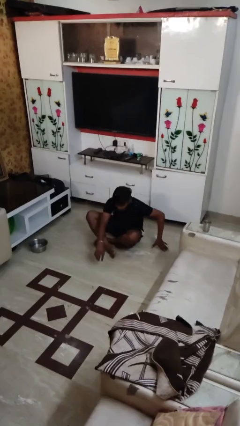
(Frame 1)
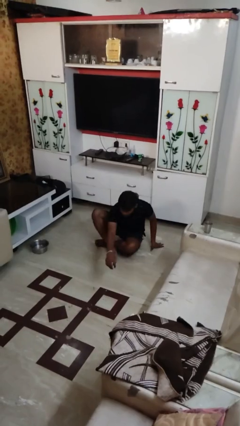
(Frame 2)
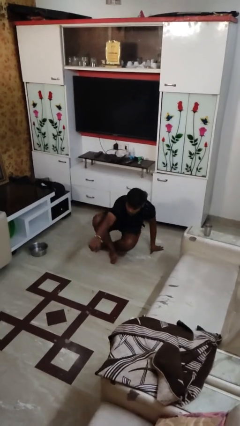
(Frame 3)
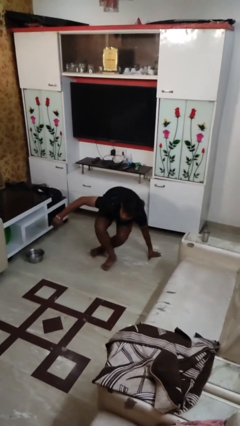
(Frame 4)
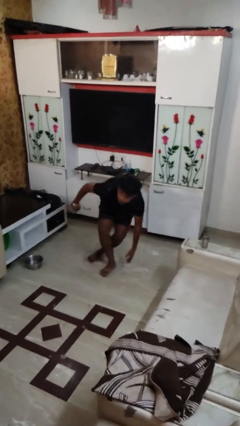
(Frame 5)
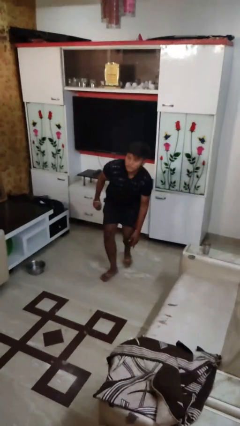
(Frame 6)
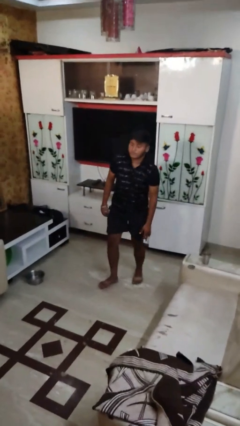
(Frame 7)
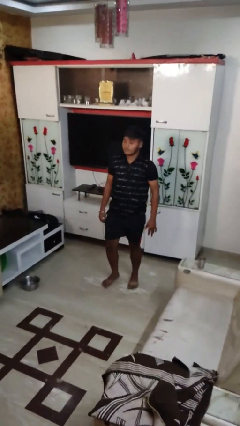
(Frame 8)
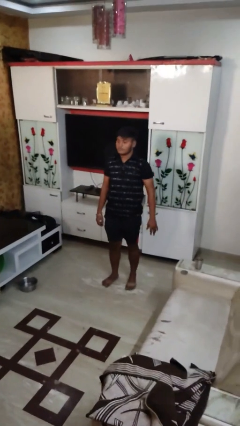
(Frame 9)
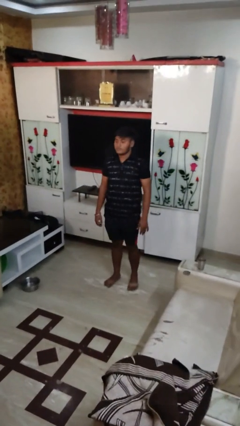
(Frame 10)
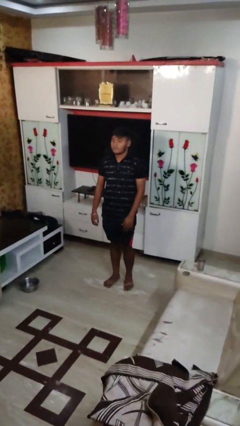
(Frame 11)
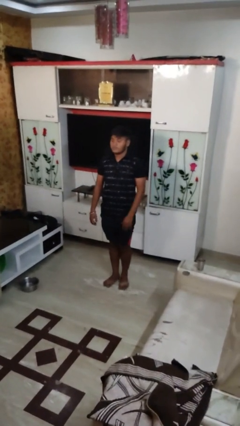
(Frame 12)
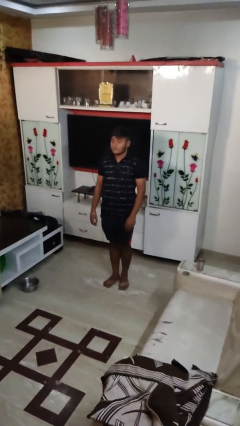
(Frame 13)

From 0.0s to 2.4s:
person stands up from floor

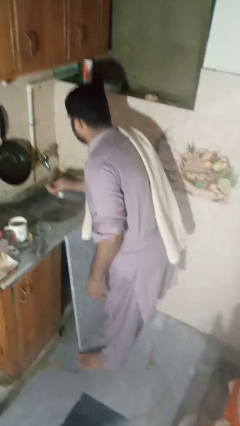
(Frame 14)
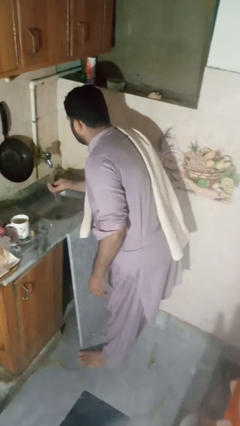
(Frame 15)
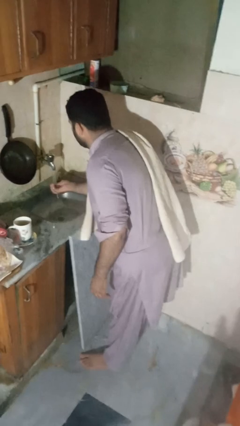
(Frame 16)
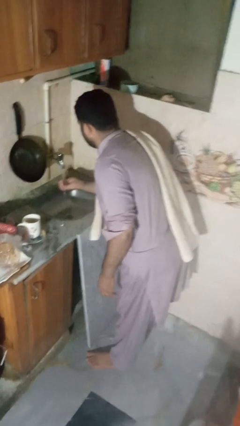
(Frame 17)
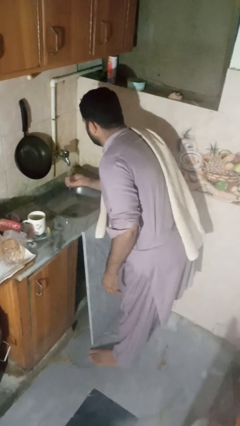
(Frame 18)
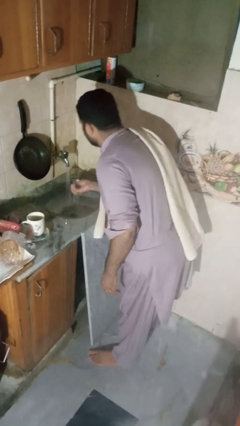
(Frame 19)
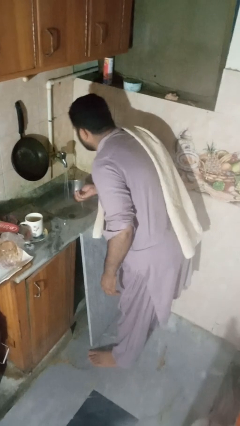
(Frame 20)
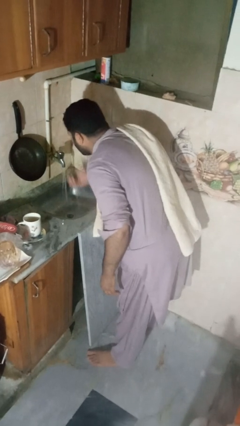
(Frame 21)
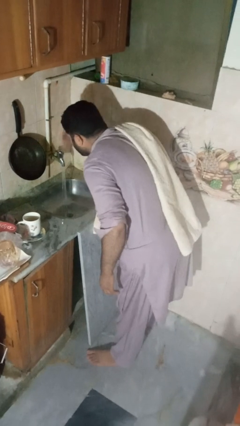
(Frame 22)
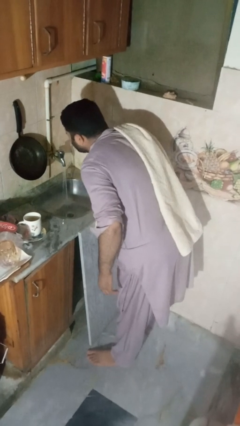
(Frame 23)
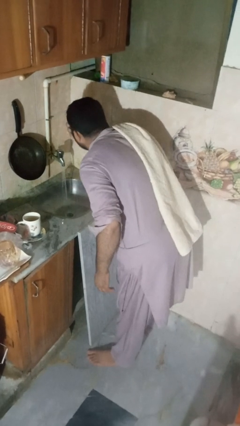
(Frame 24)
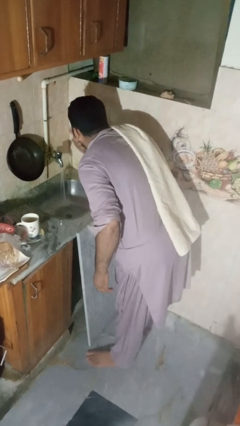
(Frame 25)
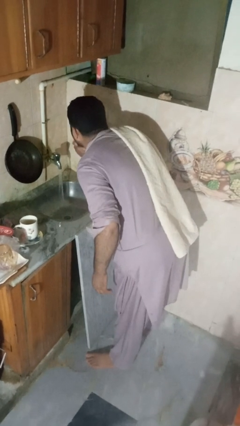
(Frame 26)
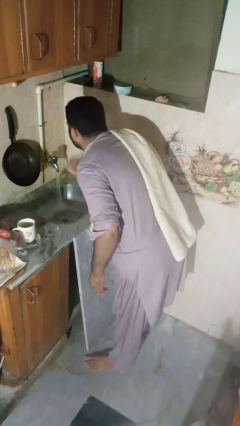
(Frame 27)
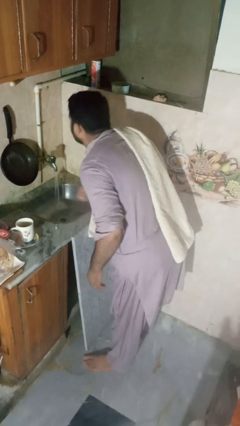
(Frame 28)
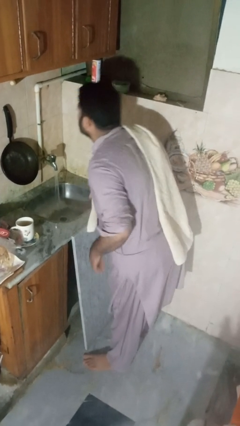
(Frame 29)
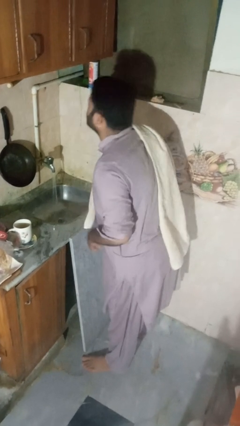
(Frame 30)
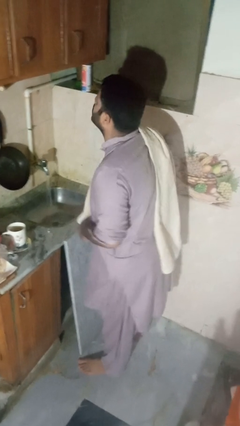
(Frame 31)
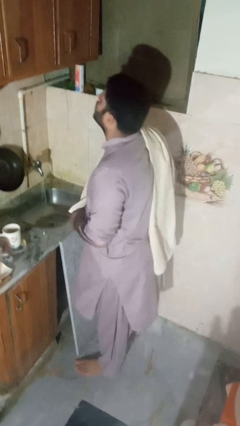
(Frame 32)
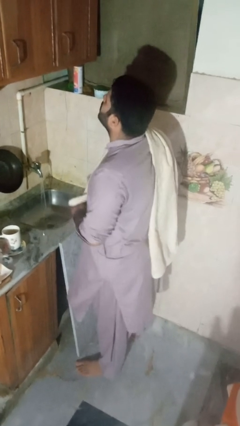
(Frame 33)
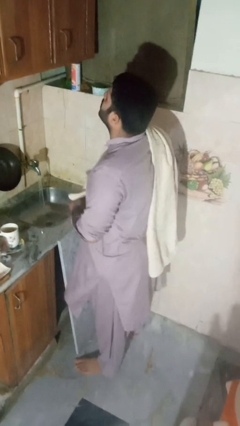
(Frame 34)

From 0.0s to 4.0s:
person washes face

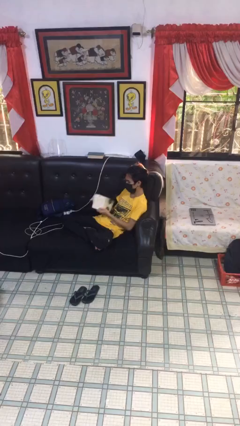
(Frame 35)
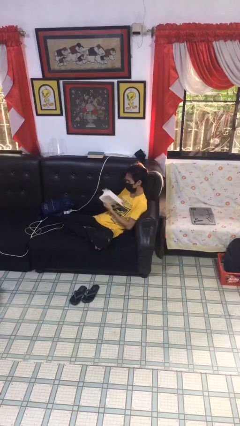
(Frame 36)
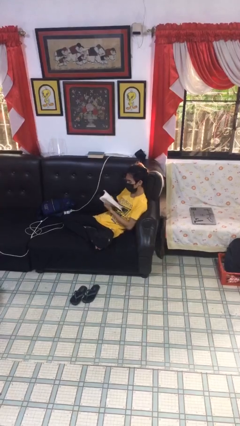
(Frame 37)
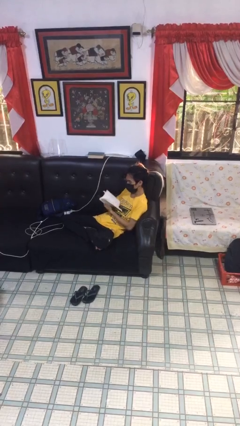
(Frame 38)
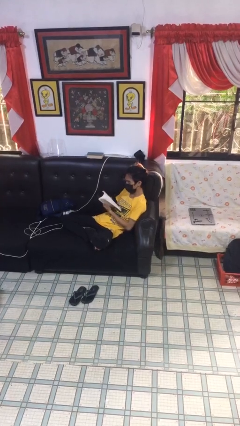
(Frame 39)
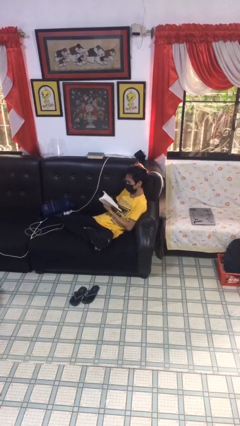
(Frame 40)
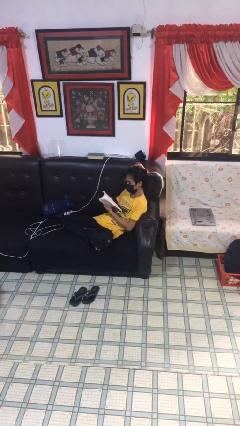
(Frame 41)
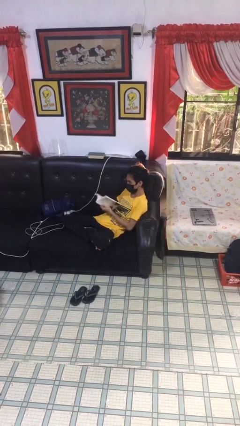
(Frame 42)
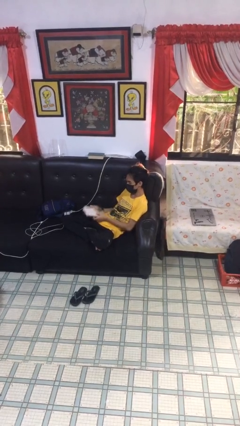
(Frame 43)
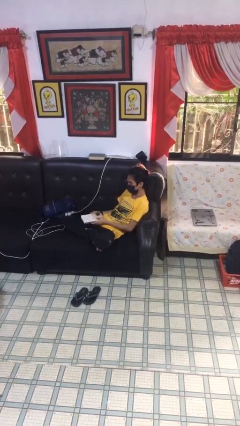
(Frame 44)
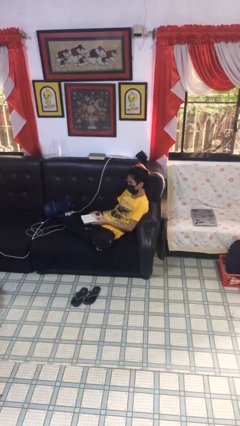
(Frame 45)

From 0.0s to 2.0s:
person reads document

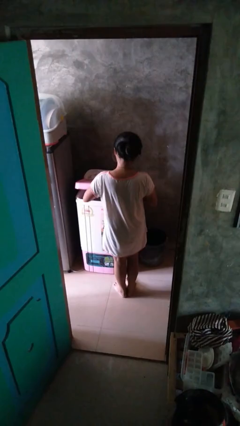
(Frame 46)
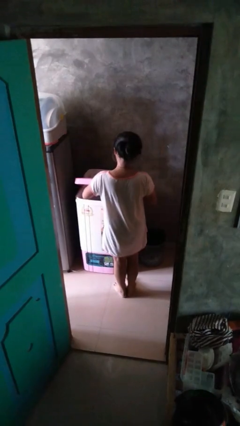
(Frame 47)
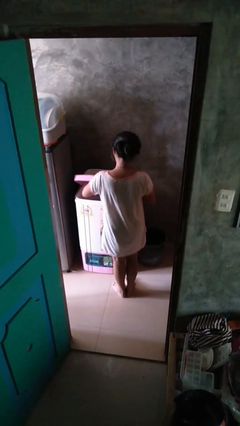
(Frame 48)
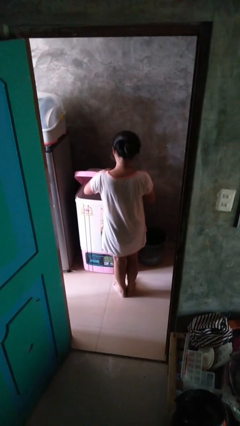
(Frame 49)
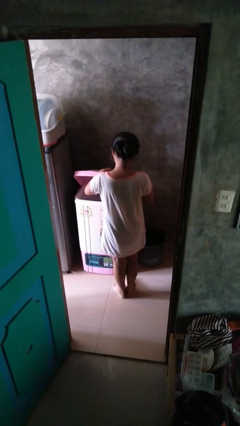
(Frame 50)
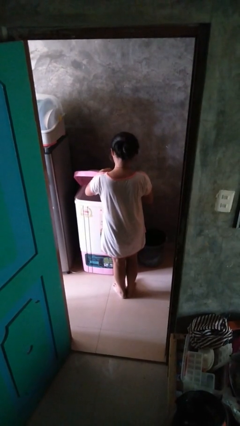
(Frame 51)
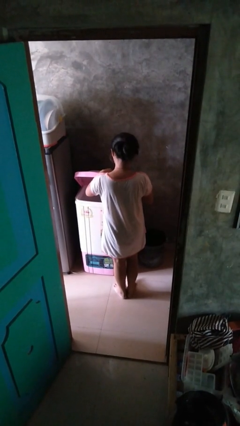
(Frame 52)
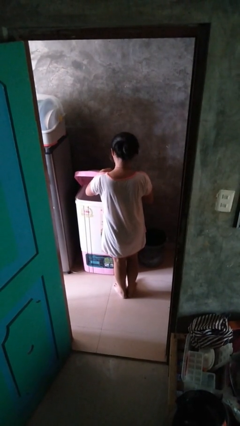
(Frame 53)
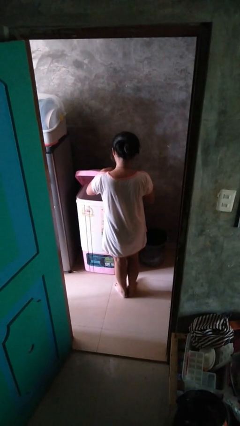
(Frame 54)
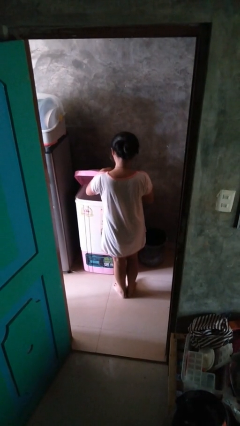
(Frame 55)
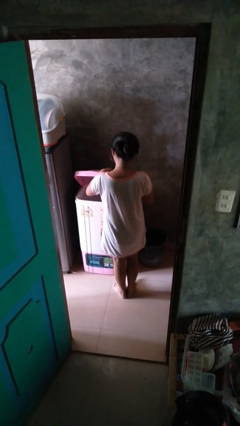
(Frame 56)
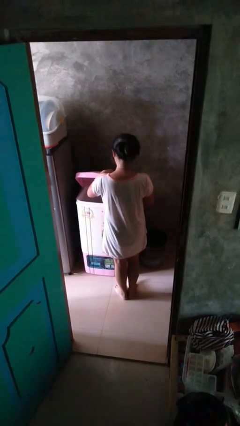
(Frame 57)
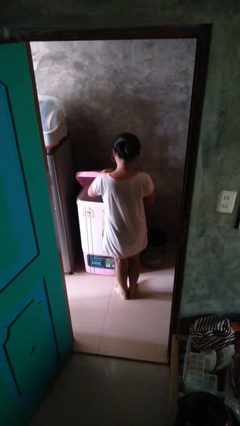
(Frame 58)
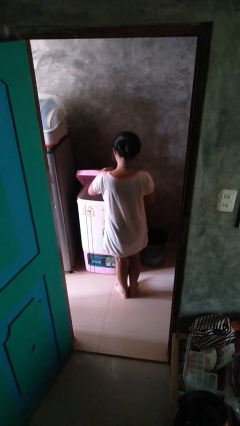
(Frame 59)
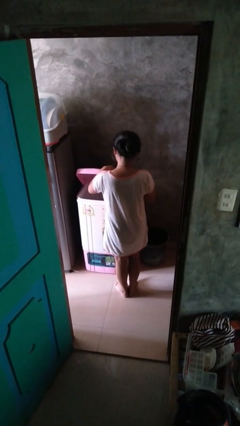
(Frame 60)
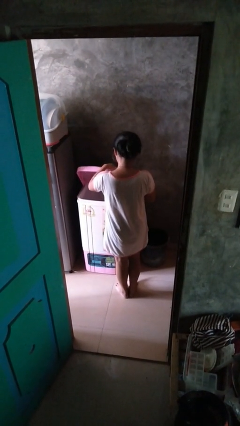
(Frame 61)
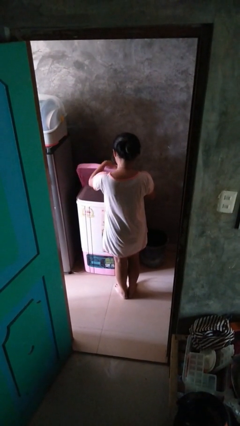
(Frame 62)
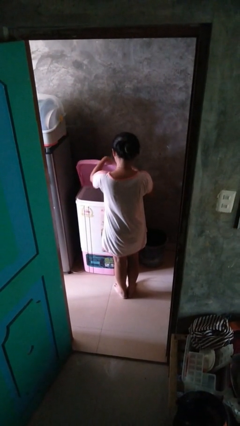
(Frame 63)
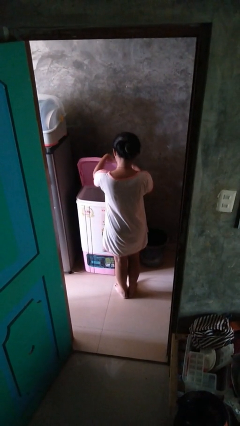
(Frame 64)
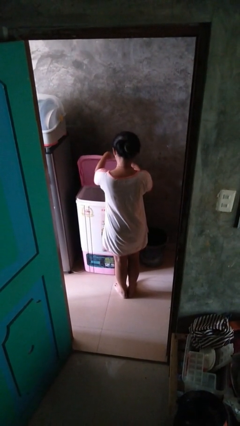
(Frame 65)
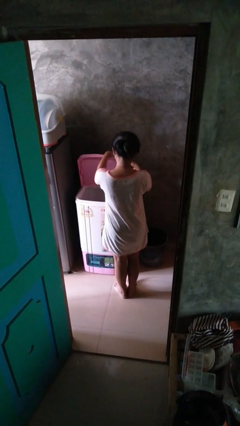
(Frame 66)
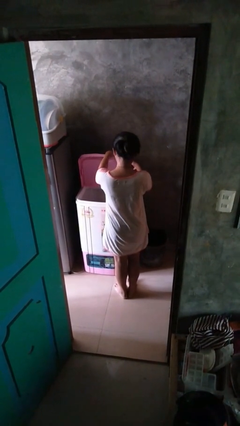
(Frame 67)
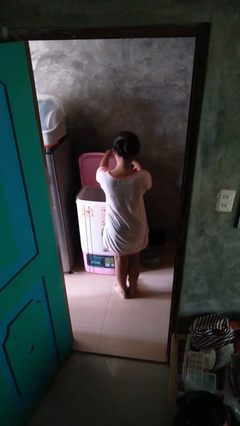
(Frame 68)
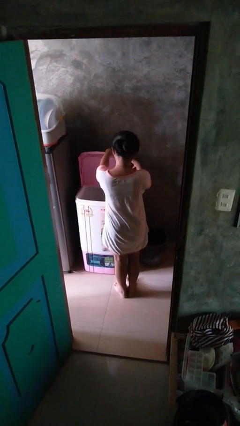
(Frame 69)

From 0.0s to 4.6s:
person opens clothes washer

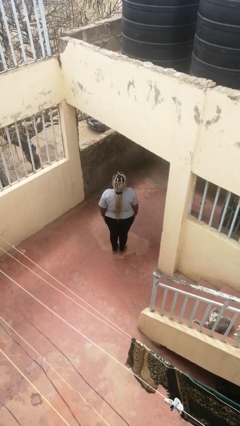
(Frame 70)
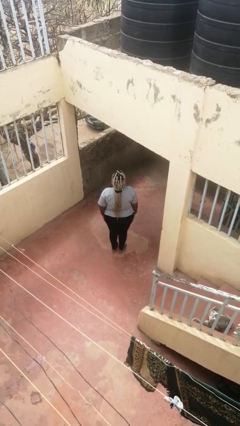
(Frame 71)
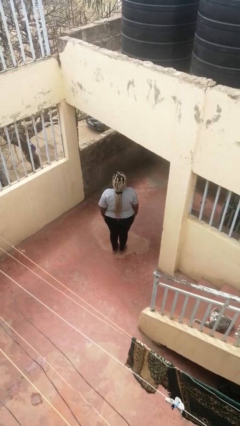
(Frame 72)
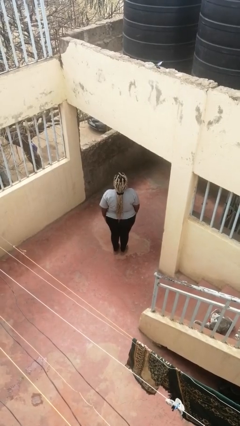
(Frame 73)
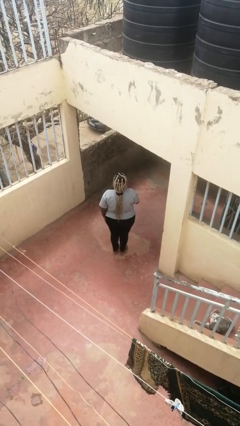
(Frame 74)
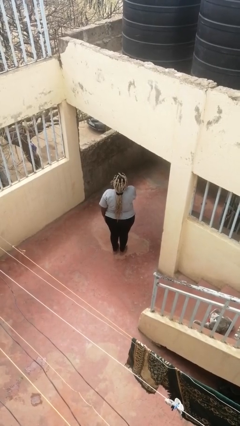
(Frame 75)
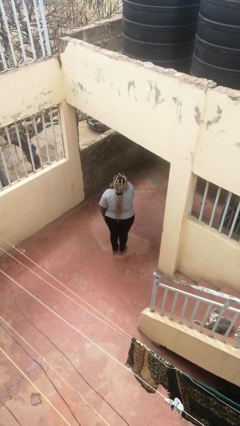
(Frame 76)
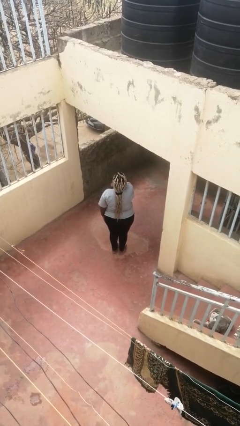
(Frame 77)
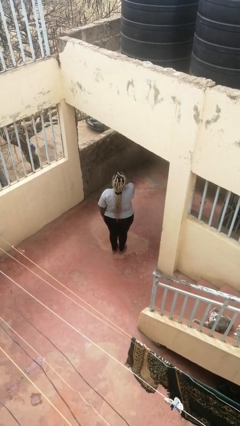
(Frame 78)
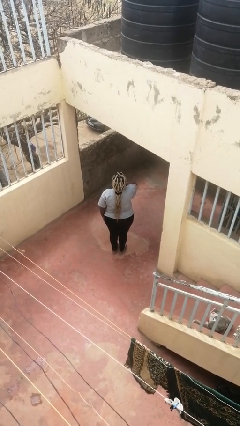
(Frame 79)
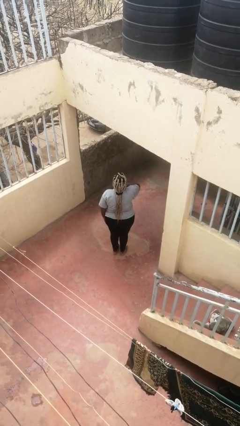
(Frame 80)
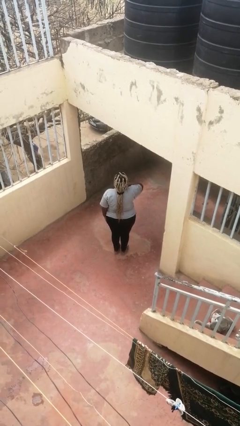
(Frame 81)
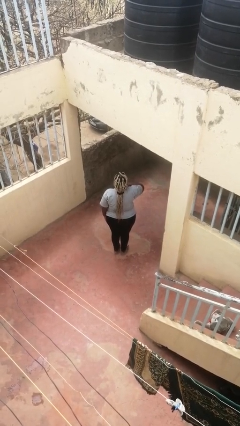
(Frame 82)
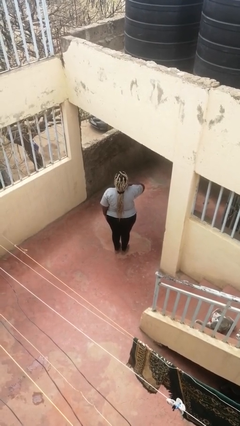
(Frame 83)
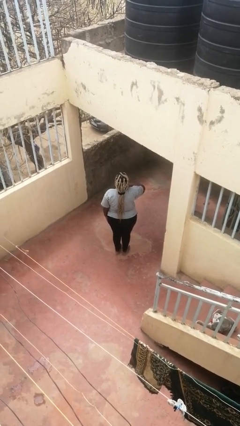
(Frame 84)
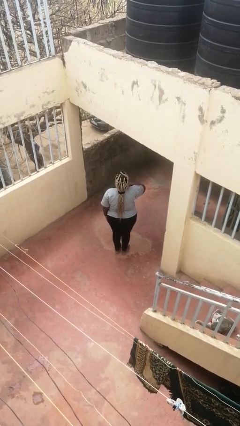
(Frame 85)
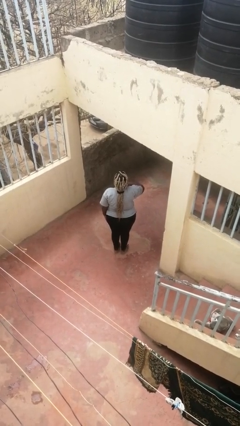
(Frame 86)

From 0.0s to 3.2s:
person gestures cut

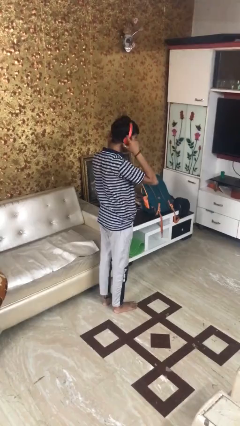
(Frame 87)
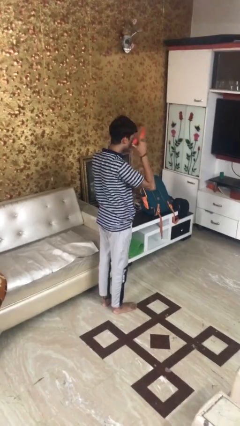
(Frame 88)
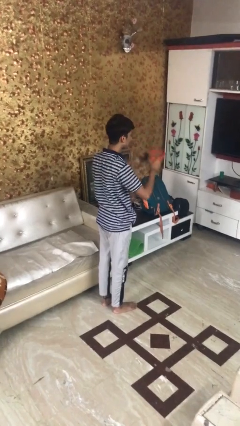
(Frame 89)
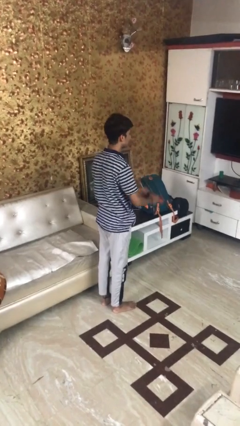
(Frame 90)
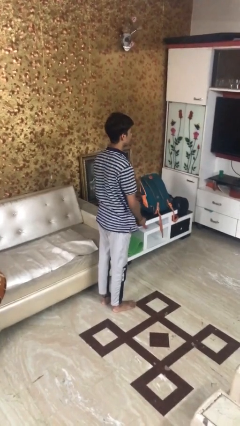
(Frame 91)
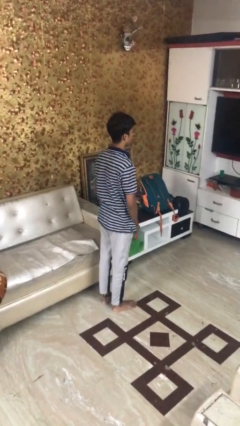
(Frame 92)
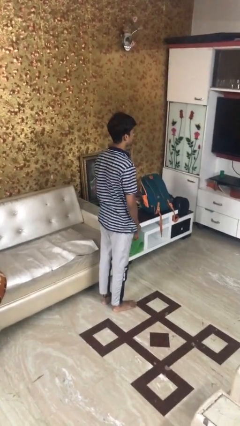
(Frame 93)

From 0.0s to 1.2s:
person takes off headphones
